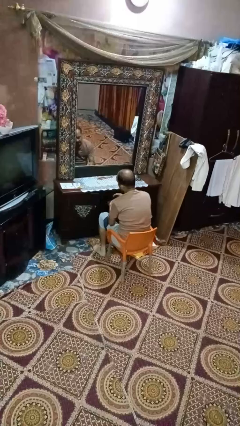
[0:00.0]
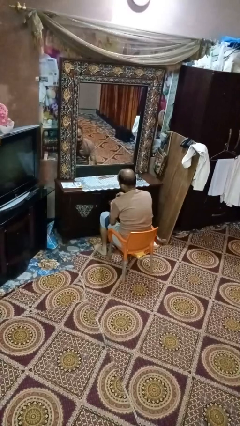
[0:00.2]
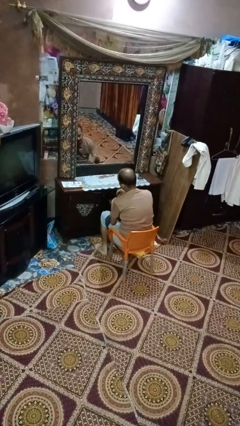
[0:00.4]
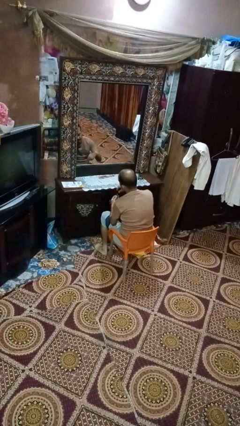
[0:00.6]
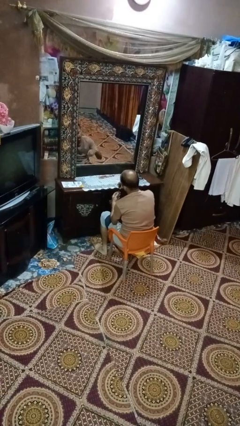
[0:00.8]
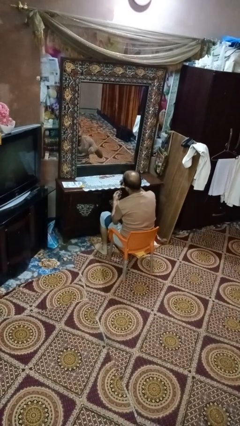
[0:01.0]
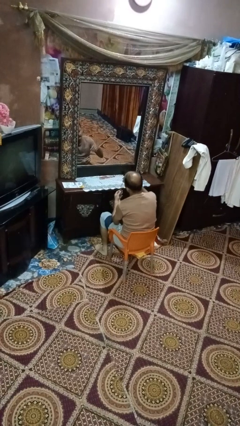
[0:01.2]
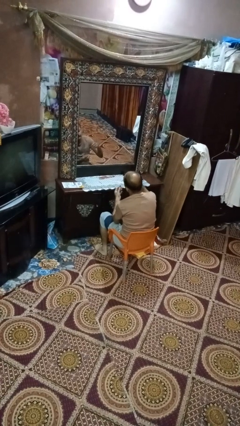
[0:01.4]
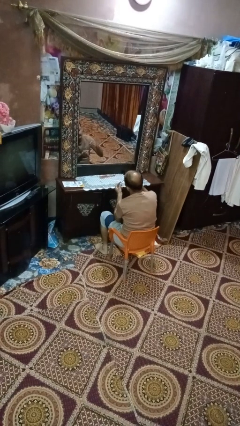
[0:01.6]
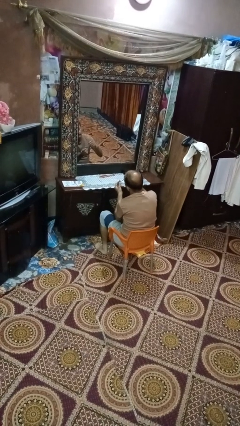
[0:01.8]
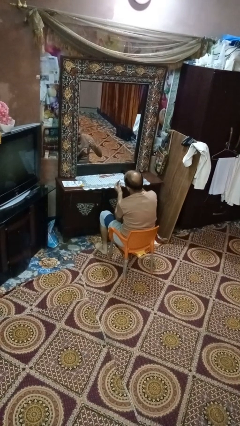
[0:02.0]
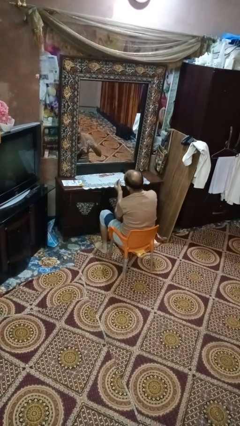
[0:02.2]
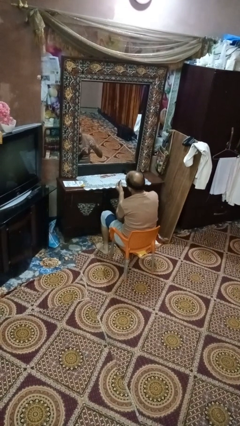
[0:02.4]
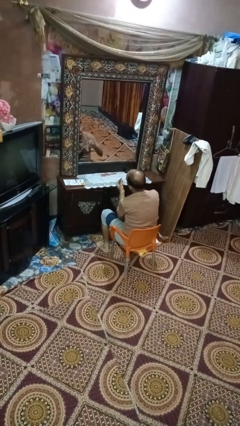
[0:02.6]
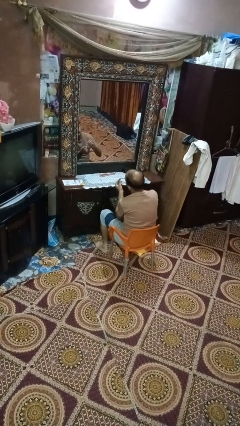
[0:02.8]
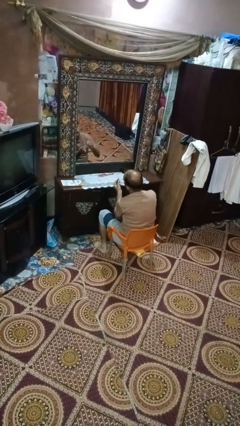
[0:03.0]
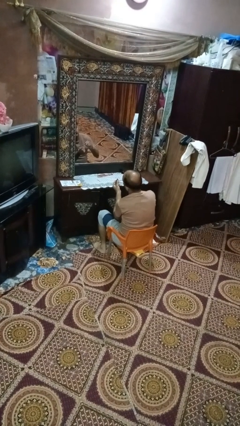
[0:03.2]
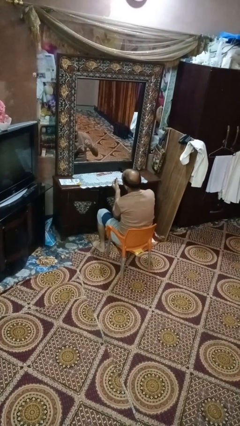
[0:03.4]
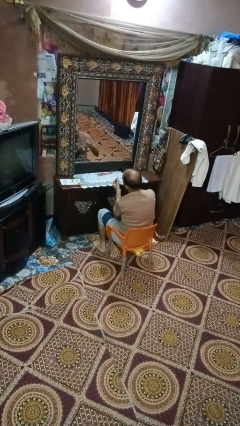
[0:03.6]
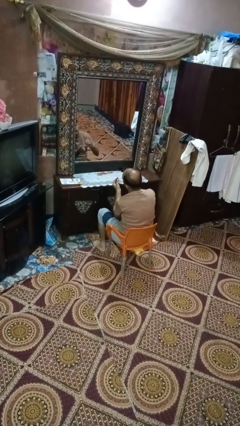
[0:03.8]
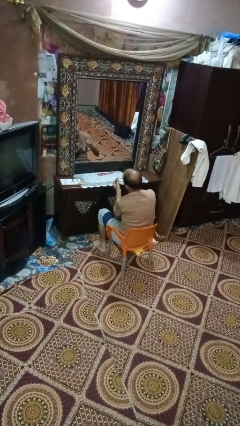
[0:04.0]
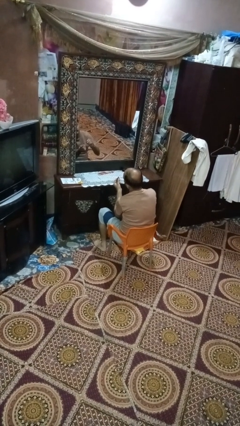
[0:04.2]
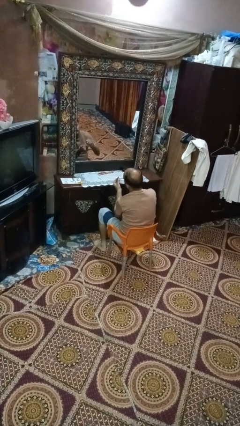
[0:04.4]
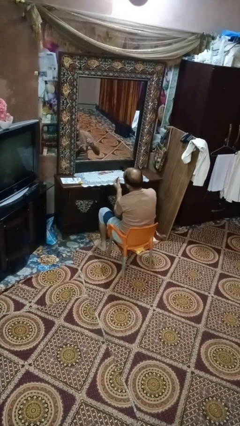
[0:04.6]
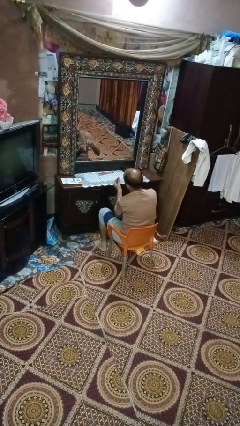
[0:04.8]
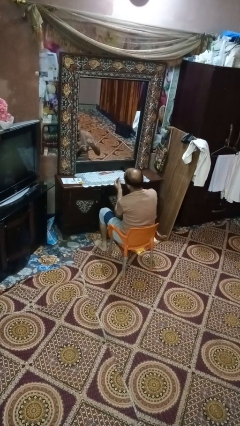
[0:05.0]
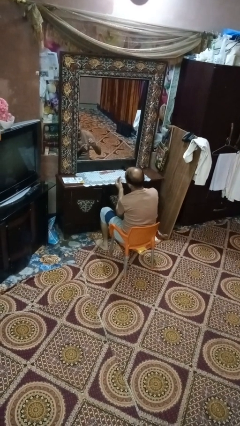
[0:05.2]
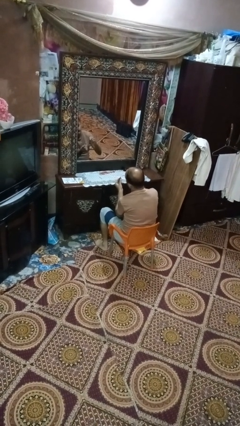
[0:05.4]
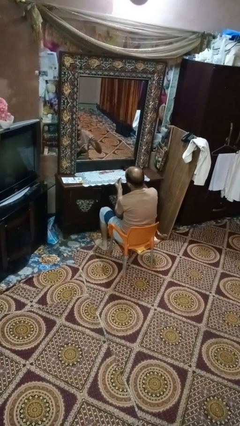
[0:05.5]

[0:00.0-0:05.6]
person paints fingernails

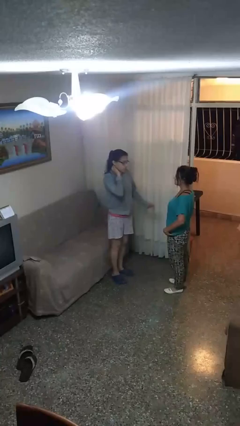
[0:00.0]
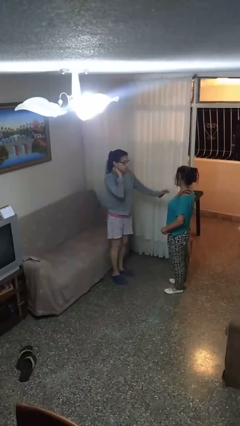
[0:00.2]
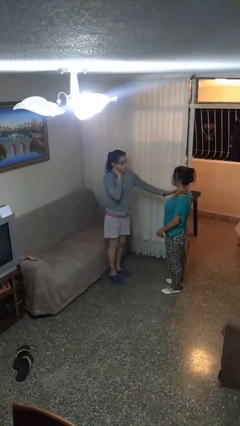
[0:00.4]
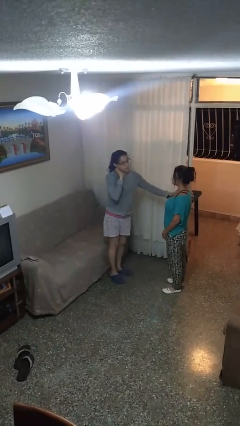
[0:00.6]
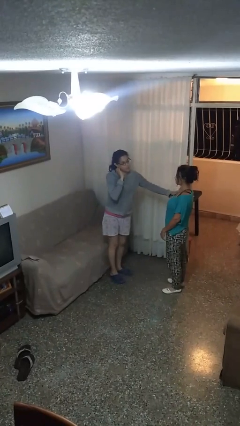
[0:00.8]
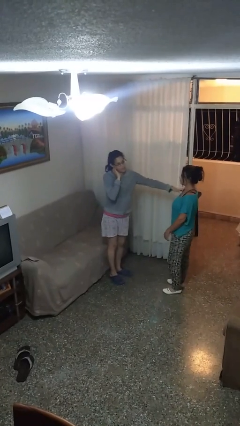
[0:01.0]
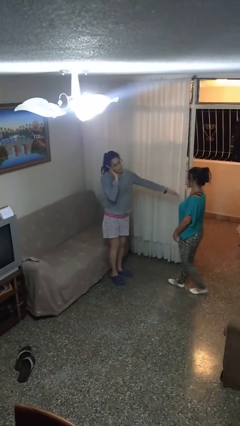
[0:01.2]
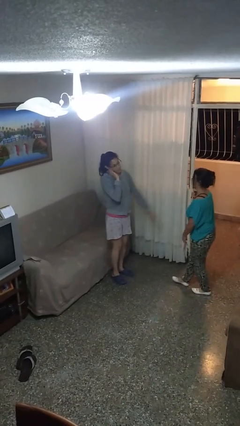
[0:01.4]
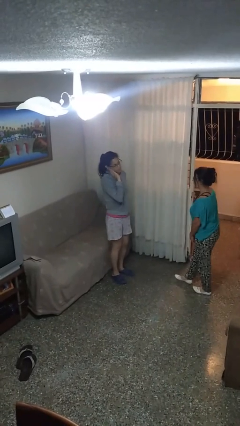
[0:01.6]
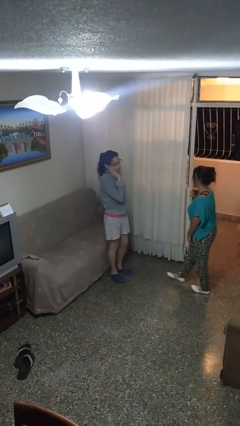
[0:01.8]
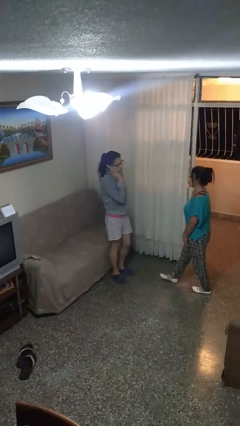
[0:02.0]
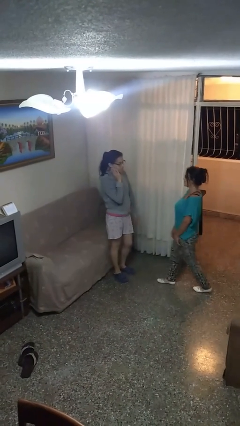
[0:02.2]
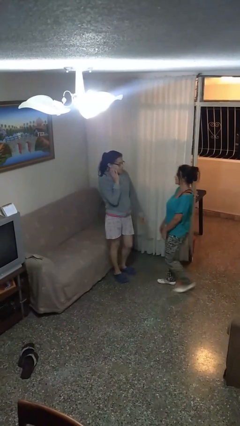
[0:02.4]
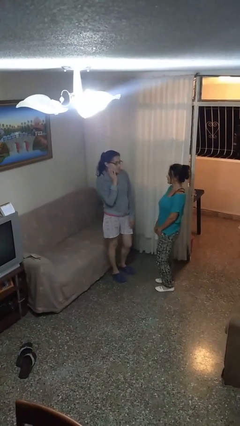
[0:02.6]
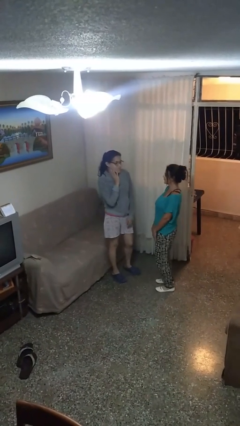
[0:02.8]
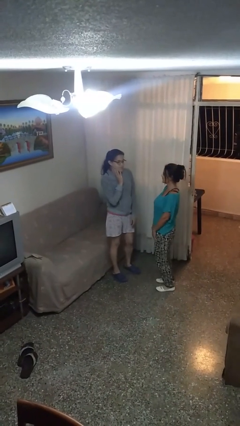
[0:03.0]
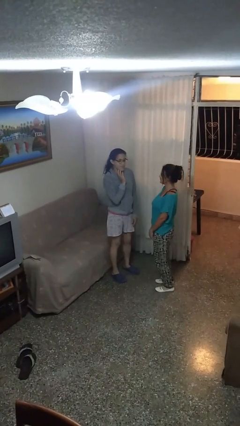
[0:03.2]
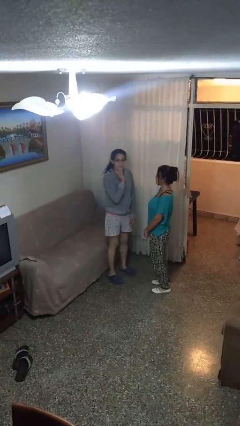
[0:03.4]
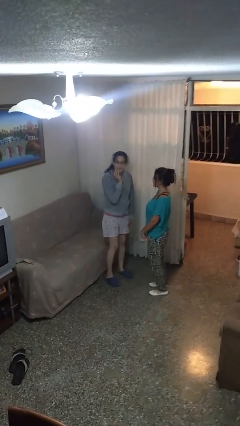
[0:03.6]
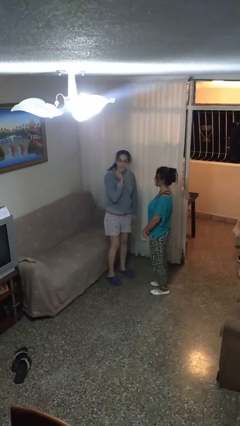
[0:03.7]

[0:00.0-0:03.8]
person shoves person

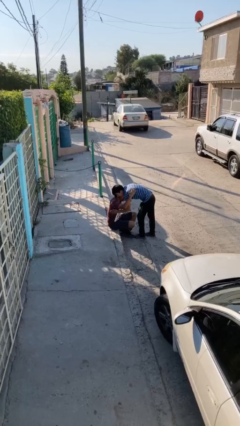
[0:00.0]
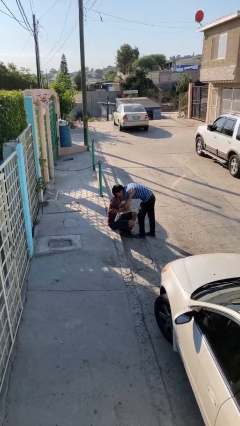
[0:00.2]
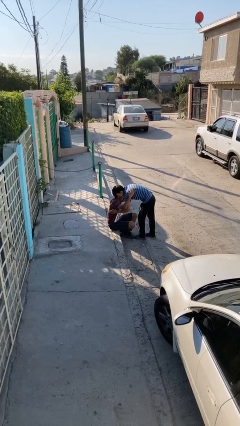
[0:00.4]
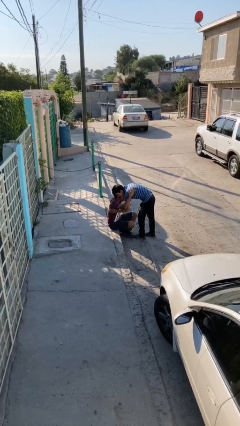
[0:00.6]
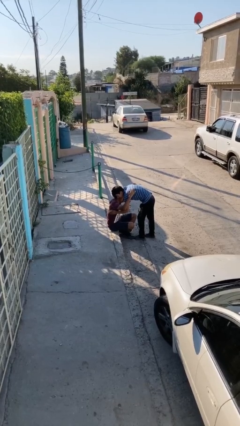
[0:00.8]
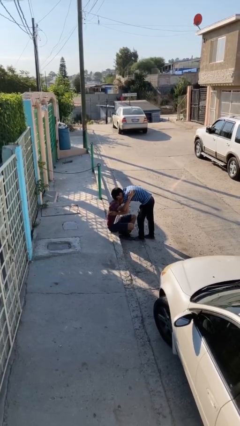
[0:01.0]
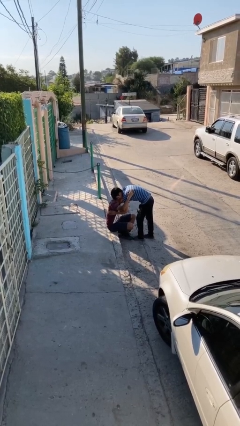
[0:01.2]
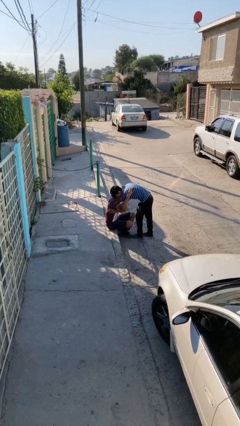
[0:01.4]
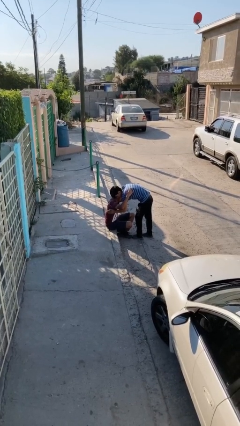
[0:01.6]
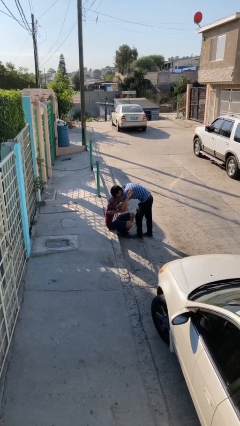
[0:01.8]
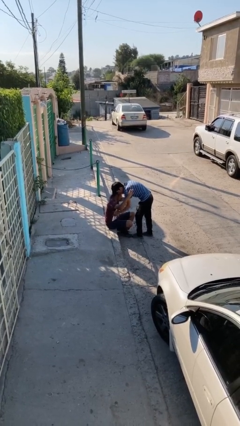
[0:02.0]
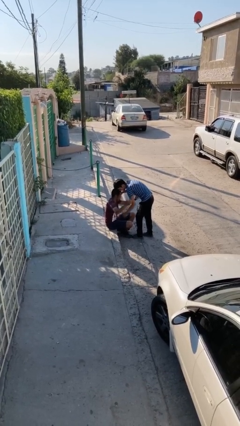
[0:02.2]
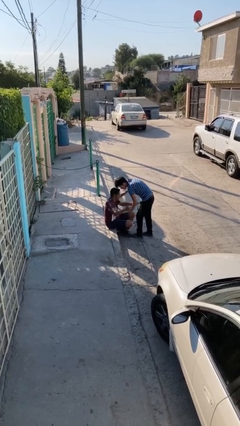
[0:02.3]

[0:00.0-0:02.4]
person embraces person

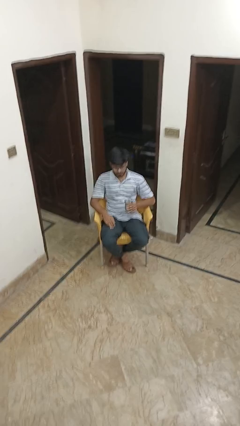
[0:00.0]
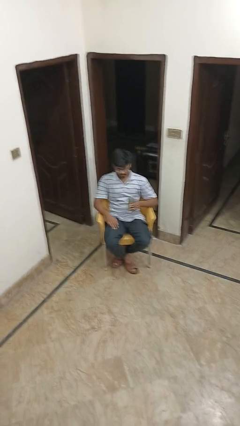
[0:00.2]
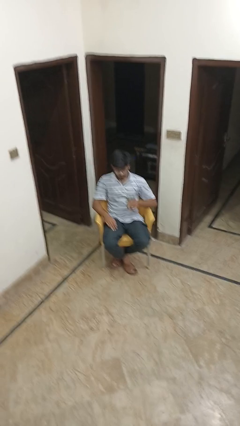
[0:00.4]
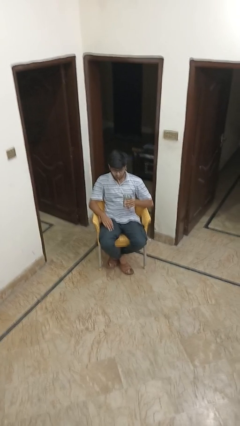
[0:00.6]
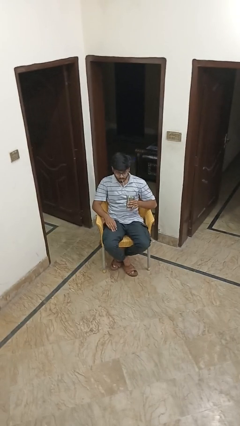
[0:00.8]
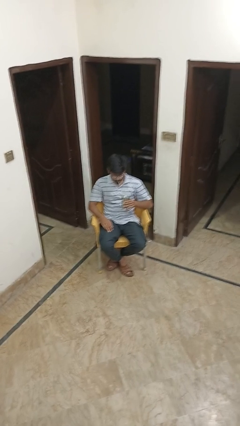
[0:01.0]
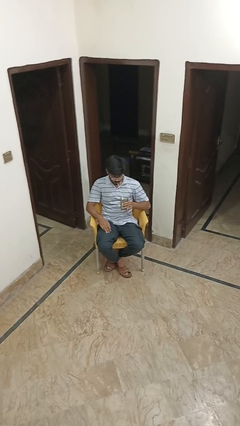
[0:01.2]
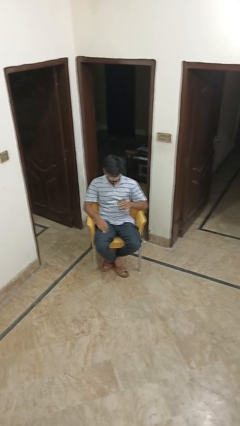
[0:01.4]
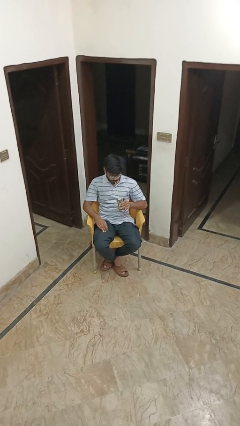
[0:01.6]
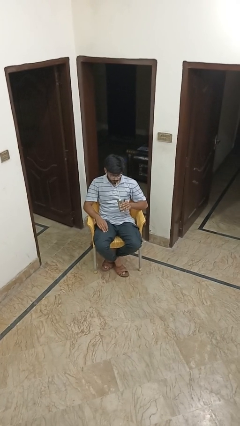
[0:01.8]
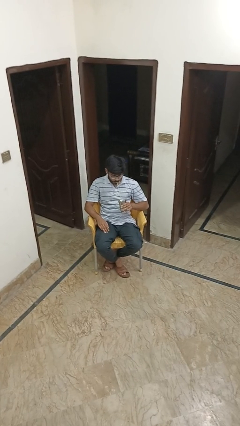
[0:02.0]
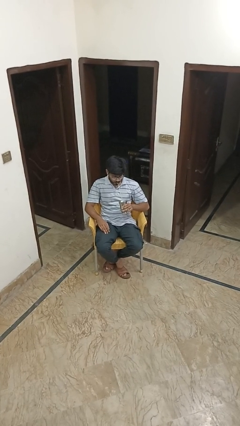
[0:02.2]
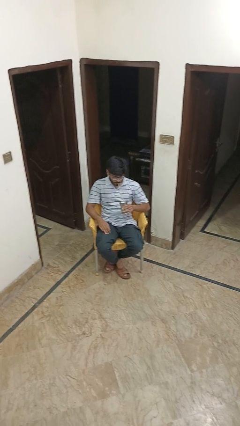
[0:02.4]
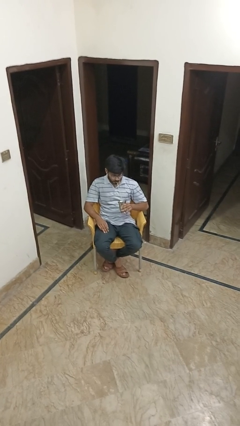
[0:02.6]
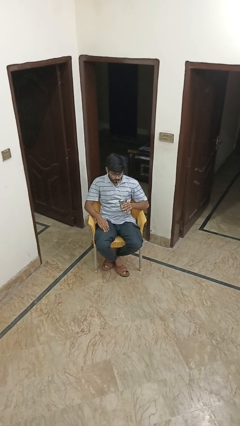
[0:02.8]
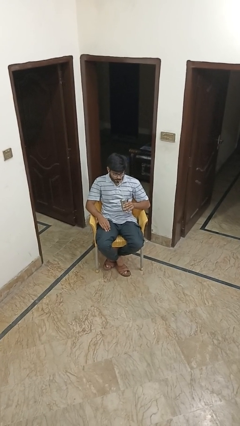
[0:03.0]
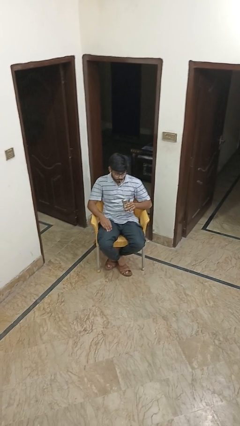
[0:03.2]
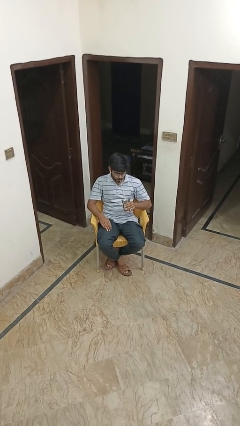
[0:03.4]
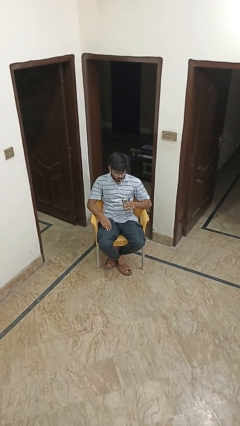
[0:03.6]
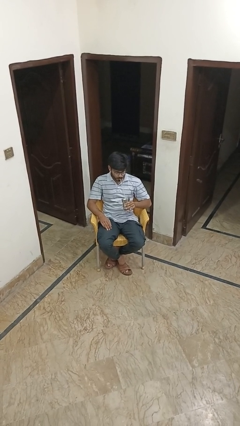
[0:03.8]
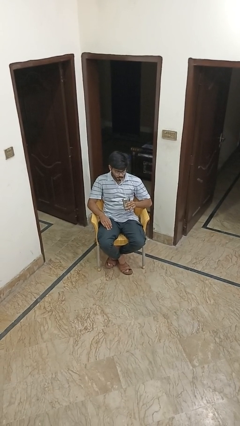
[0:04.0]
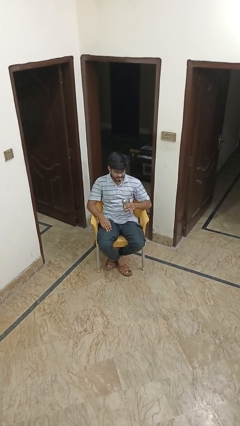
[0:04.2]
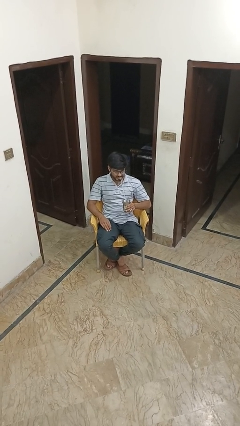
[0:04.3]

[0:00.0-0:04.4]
person drinks from straw

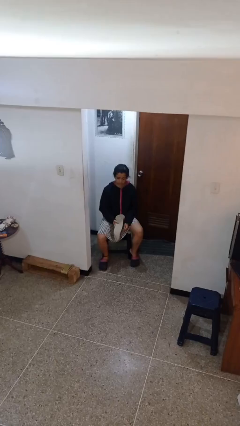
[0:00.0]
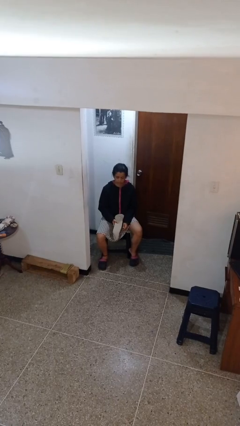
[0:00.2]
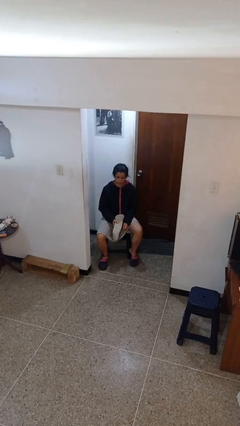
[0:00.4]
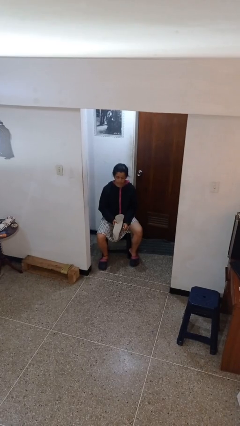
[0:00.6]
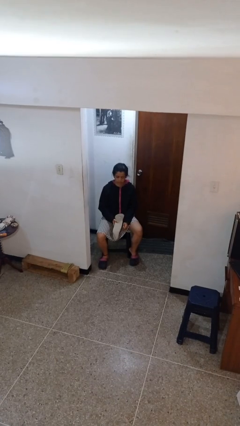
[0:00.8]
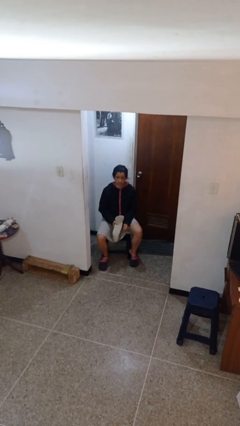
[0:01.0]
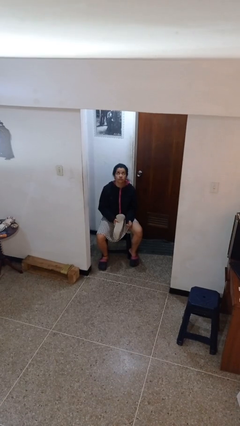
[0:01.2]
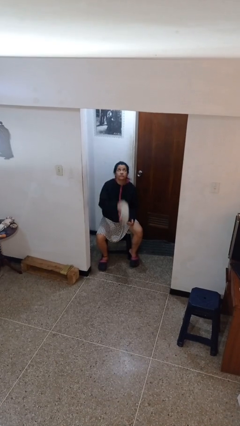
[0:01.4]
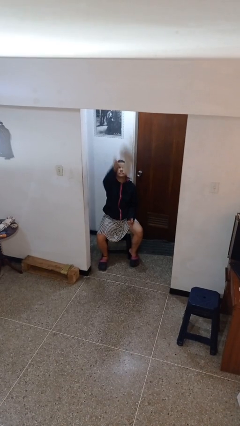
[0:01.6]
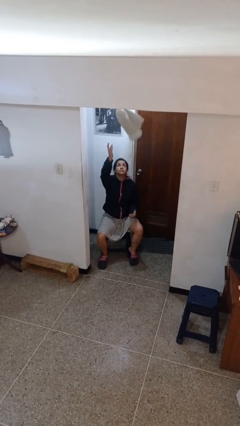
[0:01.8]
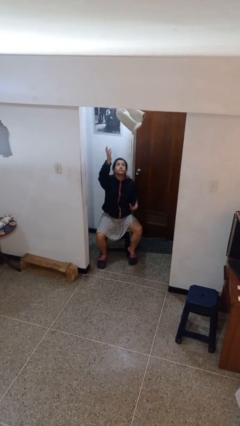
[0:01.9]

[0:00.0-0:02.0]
person drops object
